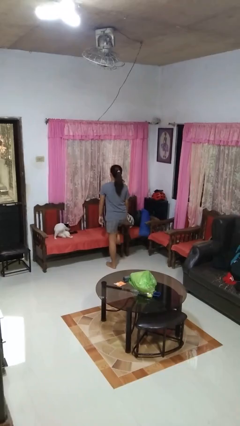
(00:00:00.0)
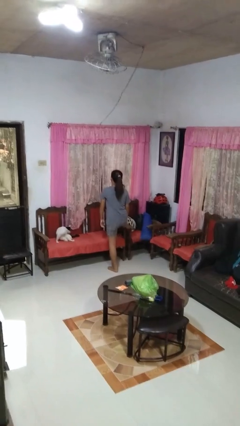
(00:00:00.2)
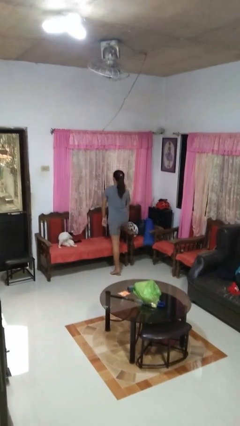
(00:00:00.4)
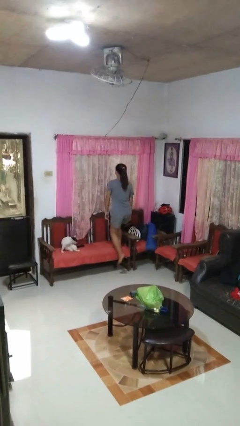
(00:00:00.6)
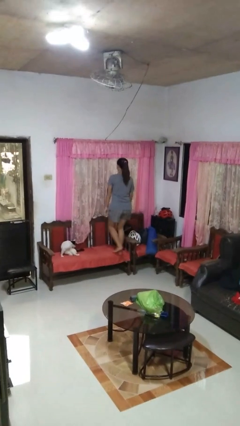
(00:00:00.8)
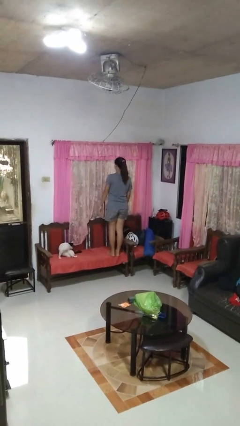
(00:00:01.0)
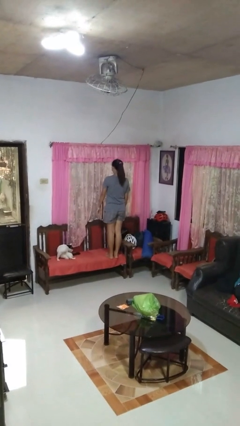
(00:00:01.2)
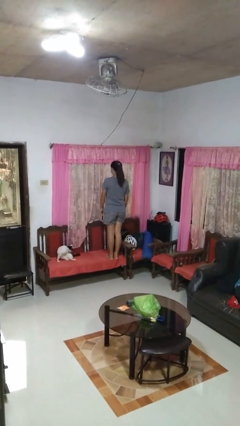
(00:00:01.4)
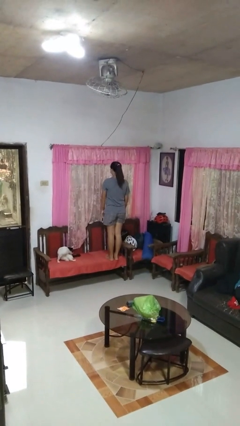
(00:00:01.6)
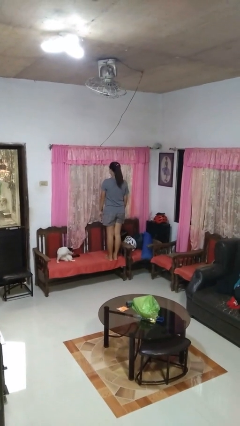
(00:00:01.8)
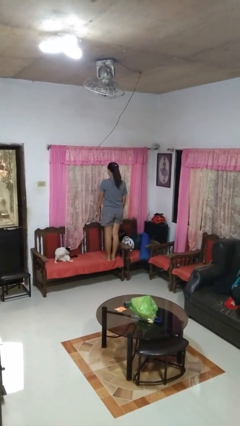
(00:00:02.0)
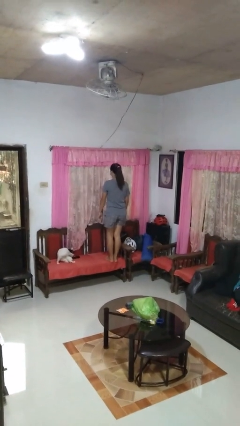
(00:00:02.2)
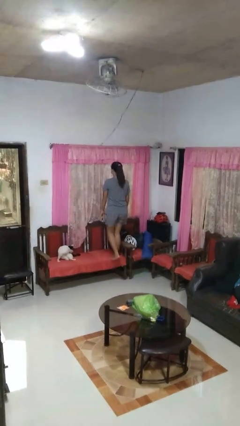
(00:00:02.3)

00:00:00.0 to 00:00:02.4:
person climbs on chair

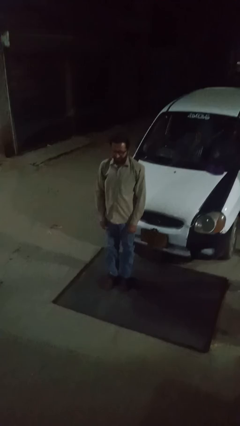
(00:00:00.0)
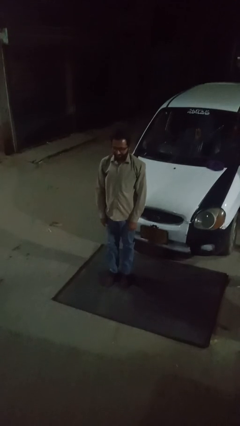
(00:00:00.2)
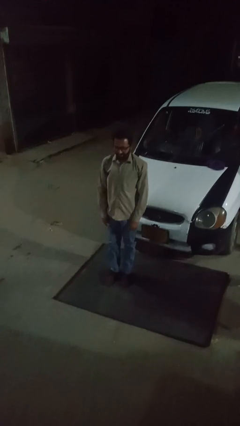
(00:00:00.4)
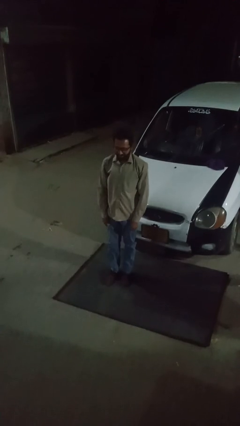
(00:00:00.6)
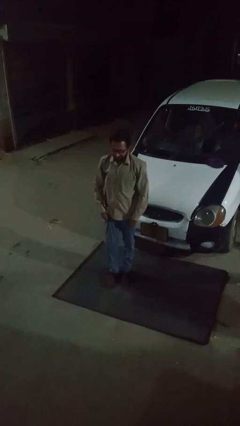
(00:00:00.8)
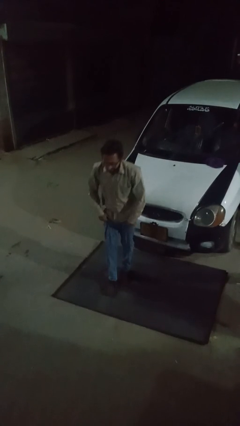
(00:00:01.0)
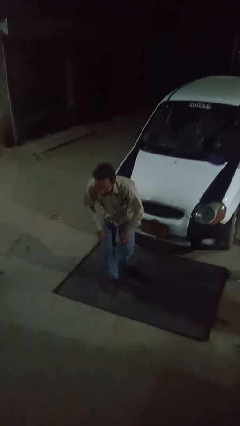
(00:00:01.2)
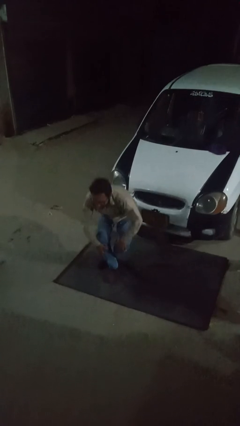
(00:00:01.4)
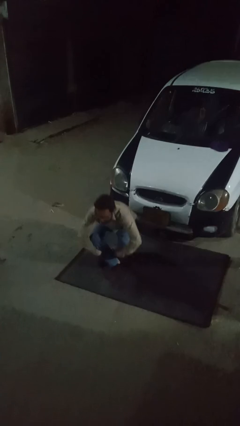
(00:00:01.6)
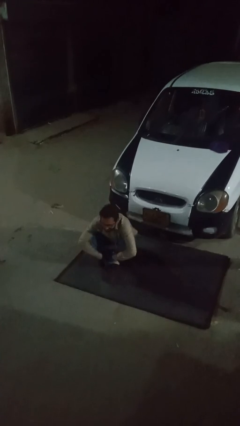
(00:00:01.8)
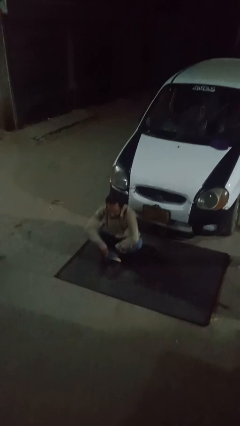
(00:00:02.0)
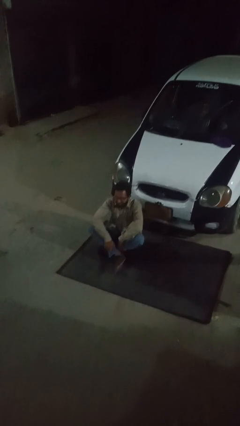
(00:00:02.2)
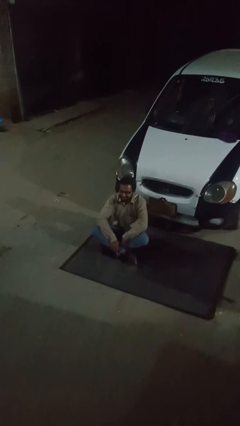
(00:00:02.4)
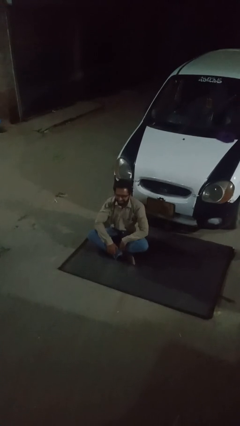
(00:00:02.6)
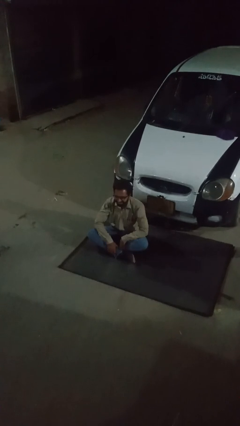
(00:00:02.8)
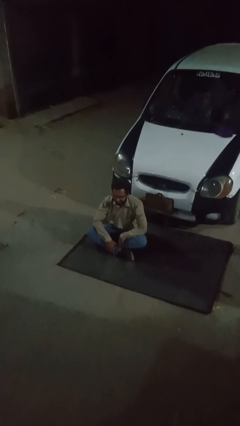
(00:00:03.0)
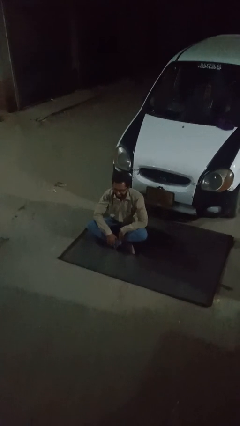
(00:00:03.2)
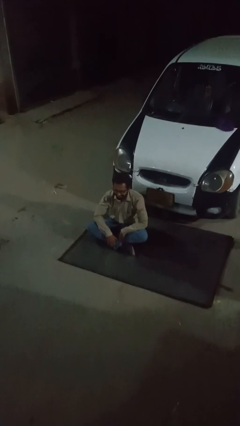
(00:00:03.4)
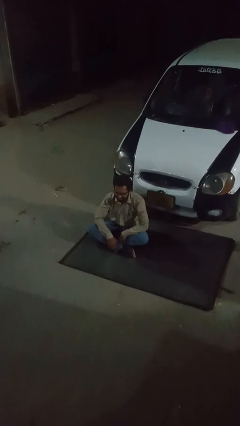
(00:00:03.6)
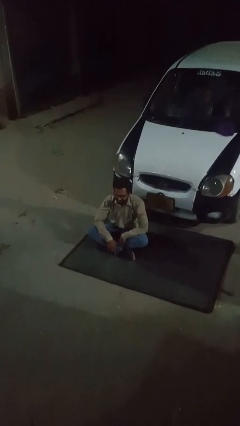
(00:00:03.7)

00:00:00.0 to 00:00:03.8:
person sits crisscross

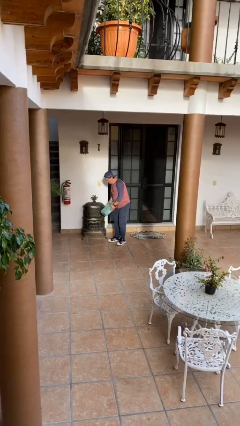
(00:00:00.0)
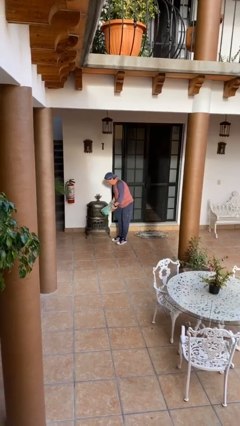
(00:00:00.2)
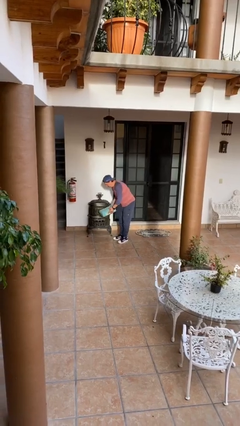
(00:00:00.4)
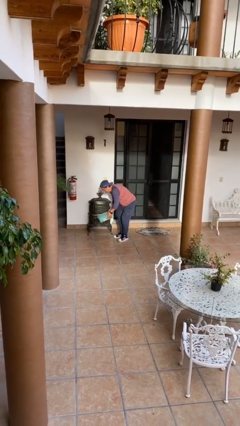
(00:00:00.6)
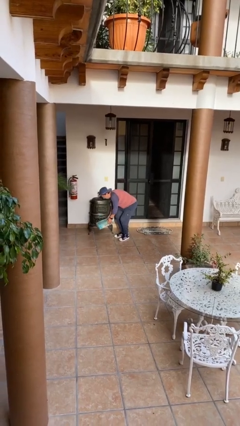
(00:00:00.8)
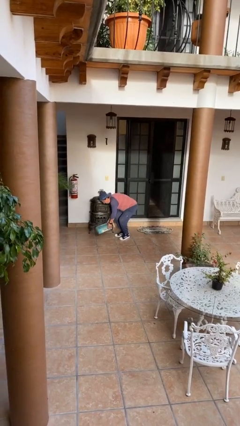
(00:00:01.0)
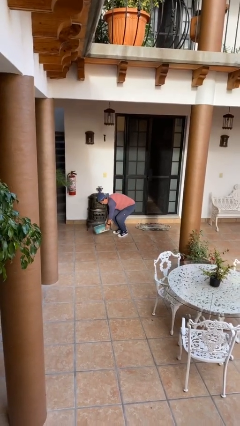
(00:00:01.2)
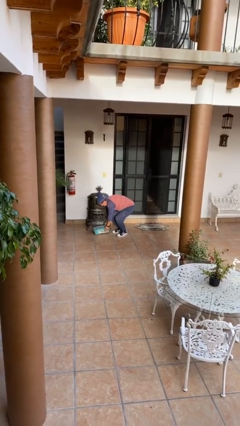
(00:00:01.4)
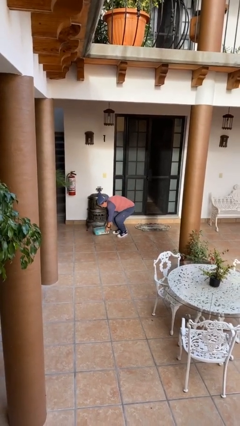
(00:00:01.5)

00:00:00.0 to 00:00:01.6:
person puts down object on floor

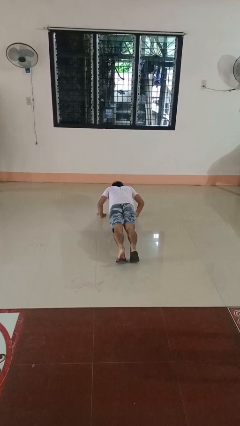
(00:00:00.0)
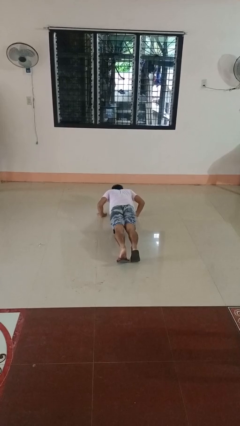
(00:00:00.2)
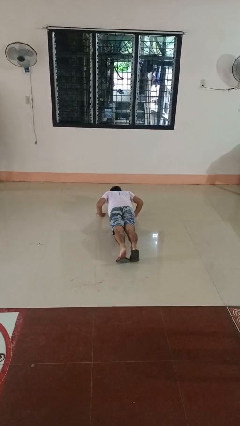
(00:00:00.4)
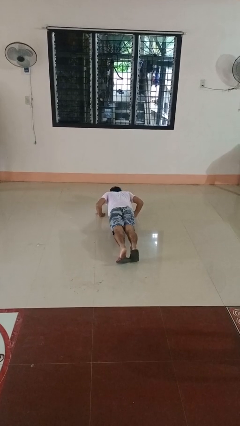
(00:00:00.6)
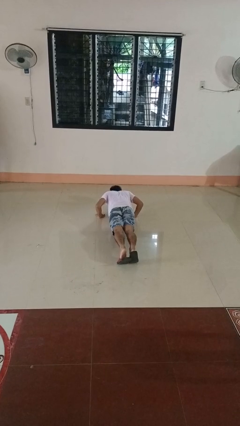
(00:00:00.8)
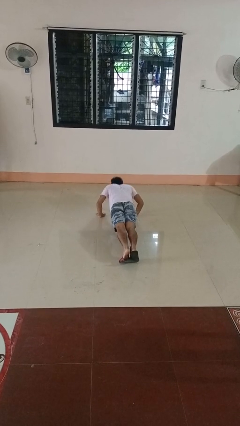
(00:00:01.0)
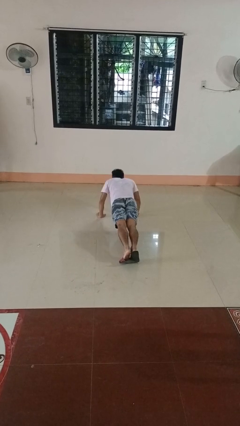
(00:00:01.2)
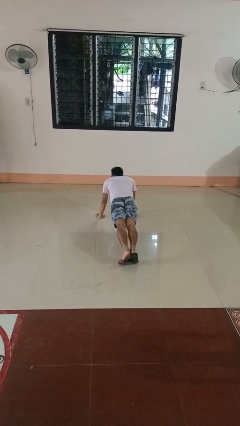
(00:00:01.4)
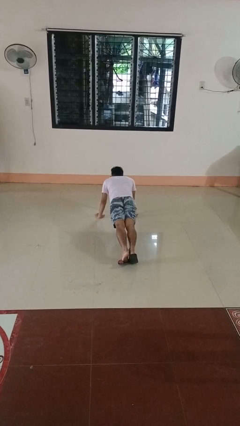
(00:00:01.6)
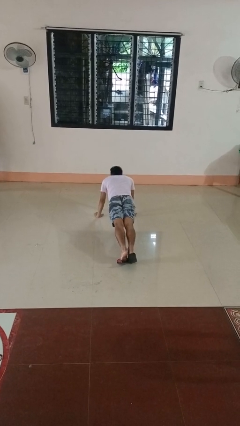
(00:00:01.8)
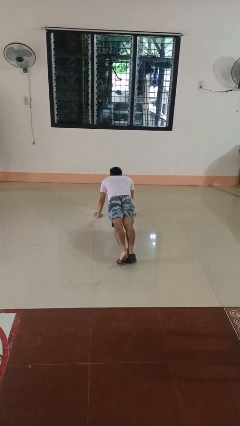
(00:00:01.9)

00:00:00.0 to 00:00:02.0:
person exercises with pushup

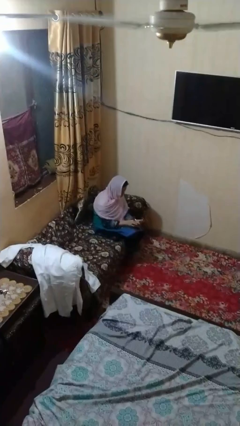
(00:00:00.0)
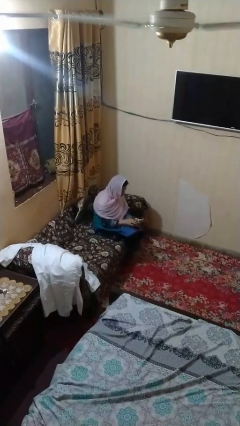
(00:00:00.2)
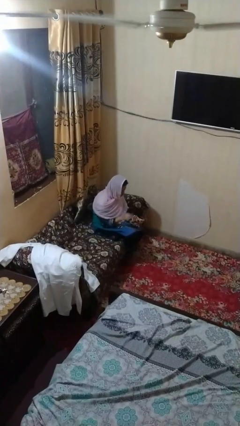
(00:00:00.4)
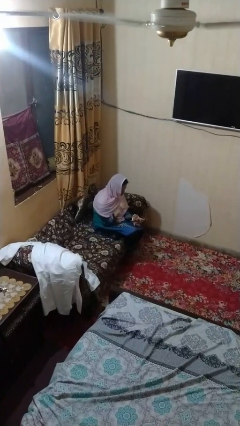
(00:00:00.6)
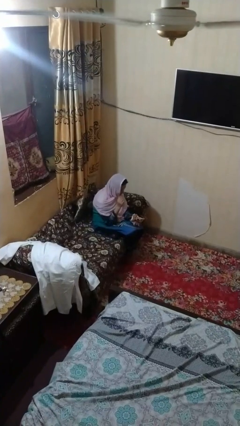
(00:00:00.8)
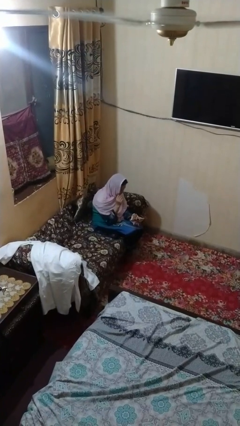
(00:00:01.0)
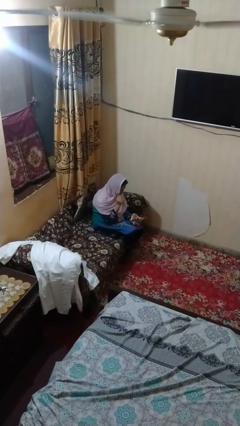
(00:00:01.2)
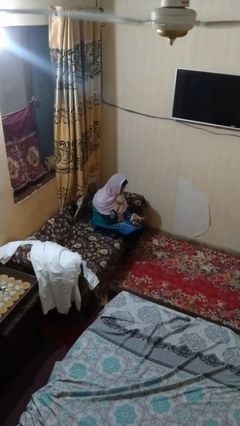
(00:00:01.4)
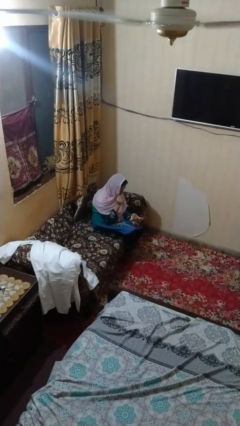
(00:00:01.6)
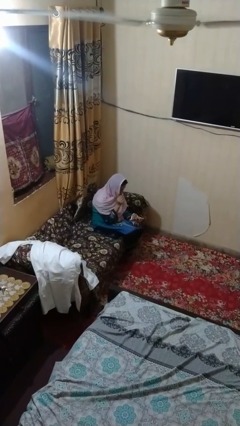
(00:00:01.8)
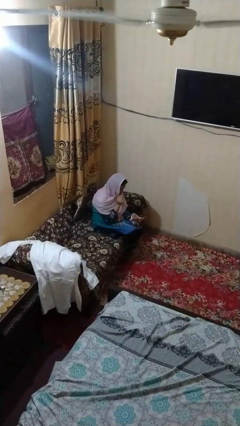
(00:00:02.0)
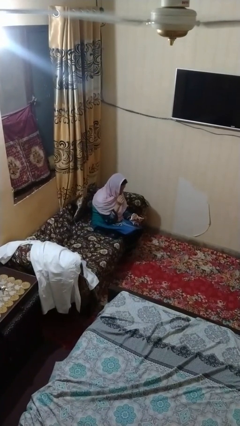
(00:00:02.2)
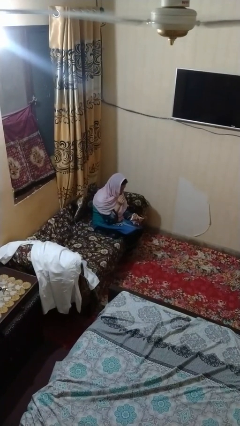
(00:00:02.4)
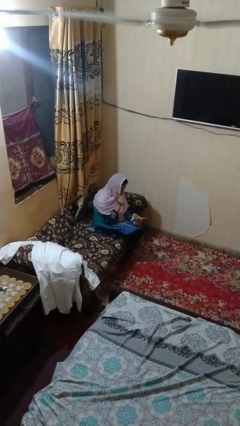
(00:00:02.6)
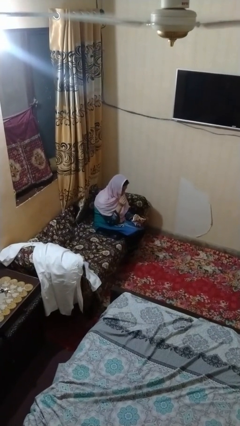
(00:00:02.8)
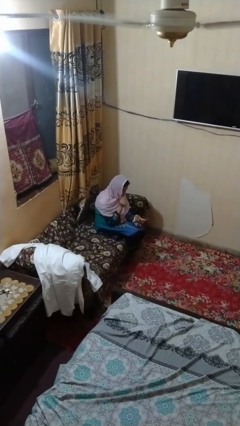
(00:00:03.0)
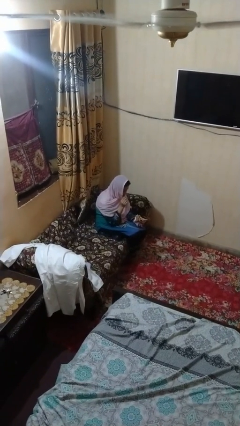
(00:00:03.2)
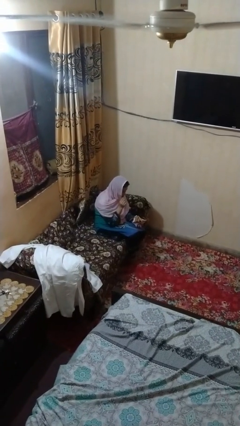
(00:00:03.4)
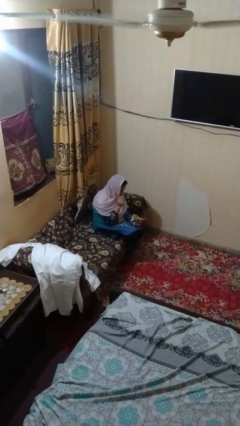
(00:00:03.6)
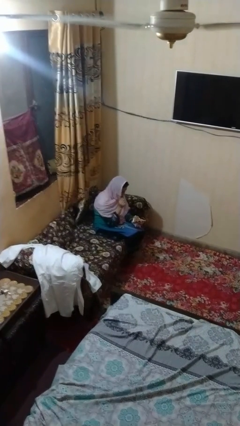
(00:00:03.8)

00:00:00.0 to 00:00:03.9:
person eats snack from bag

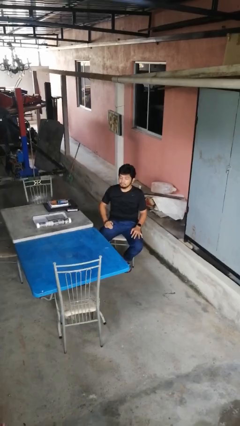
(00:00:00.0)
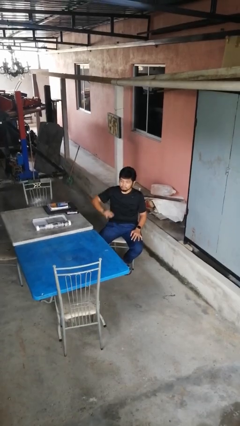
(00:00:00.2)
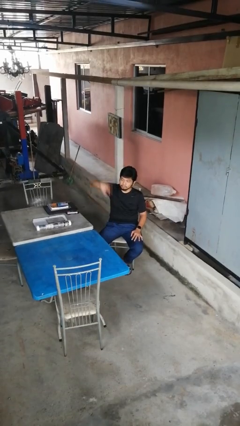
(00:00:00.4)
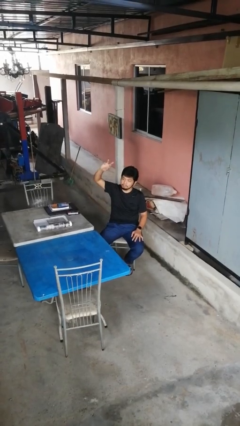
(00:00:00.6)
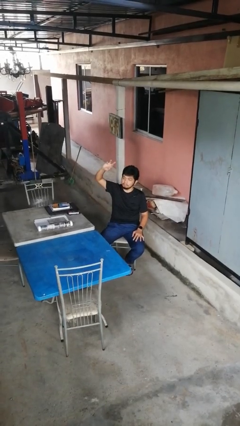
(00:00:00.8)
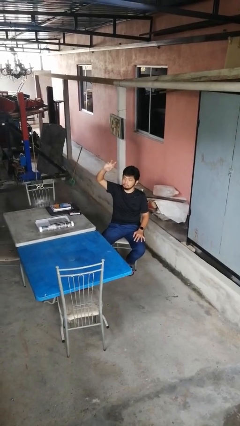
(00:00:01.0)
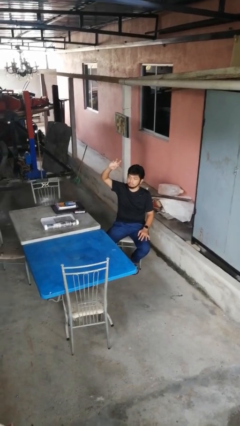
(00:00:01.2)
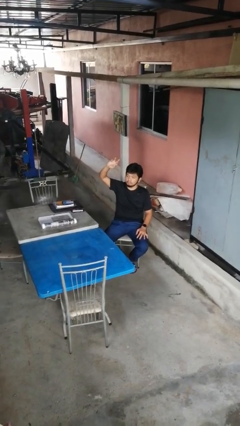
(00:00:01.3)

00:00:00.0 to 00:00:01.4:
person gestures swipe up

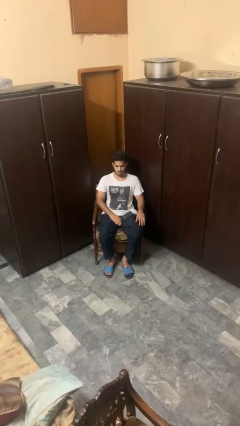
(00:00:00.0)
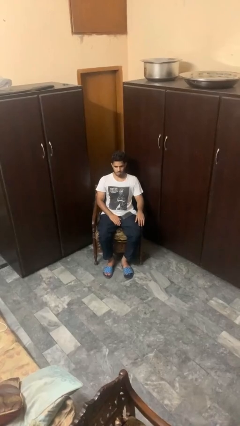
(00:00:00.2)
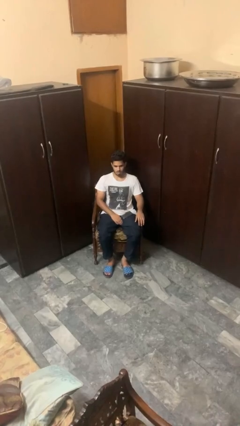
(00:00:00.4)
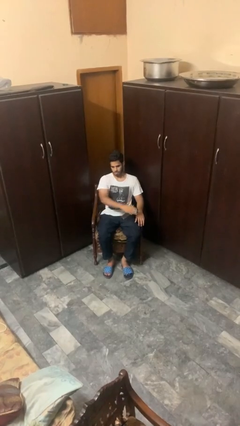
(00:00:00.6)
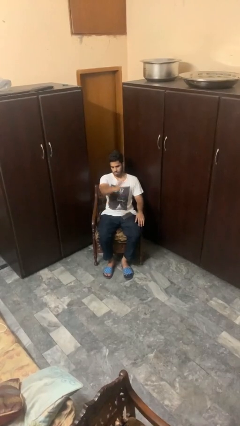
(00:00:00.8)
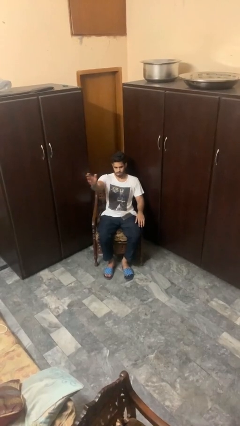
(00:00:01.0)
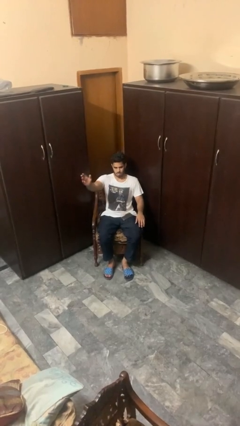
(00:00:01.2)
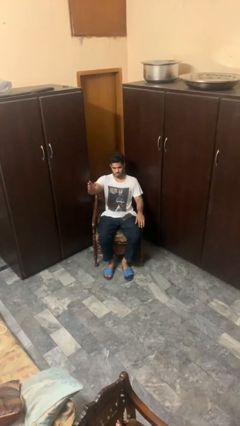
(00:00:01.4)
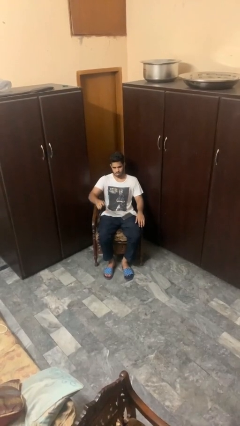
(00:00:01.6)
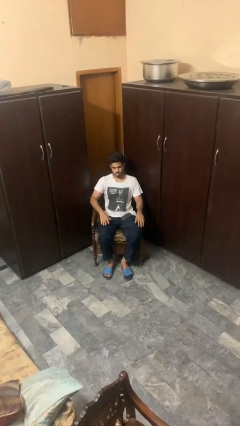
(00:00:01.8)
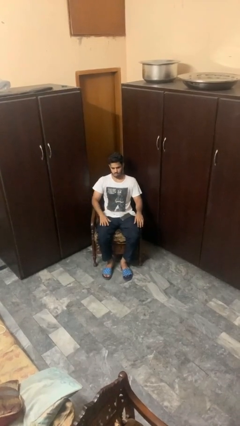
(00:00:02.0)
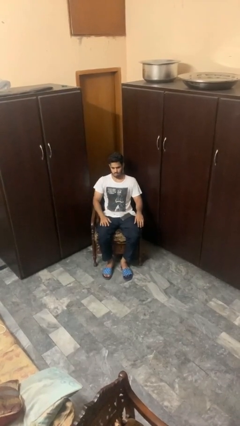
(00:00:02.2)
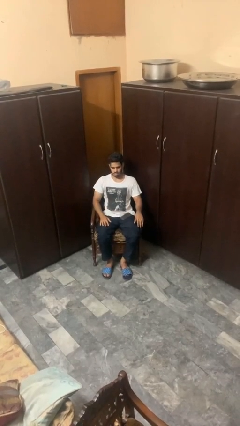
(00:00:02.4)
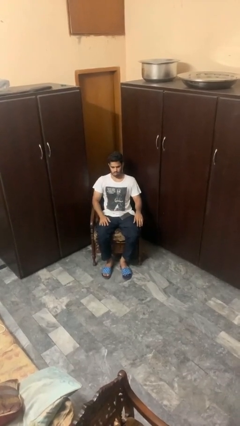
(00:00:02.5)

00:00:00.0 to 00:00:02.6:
person gestures swipe right
